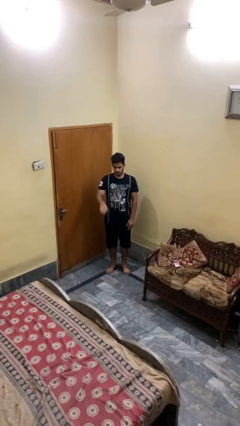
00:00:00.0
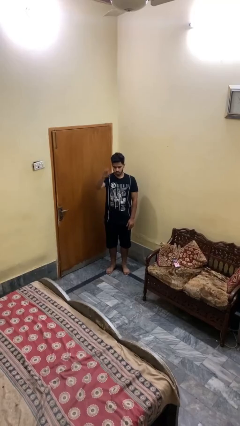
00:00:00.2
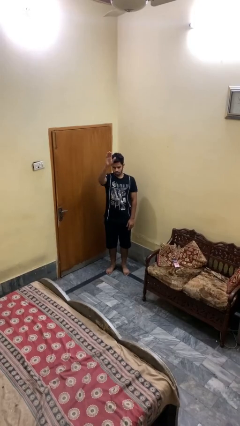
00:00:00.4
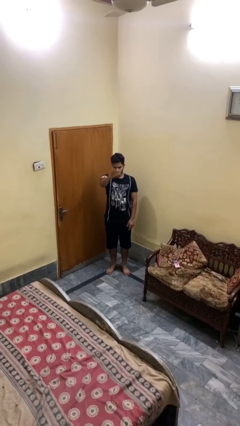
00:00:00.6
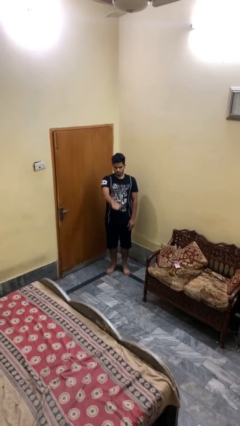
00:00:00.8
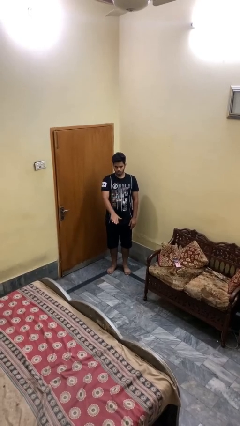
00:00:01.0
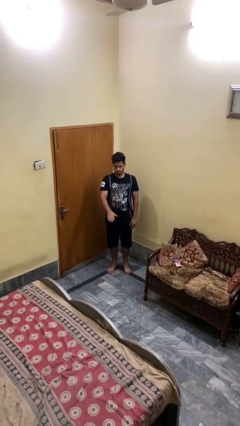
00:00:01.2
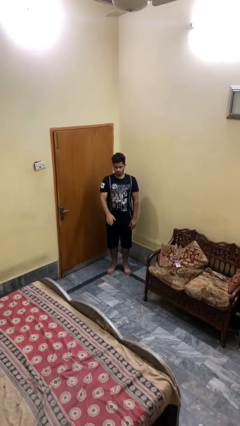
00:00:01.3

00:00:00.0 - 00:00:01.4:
person gestures swipe down

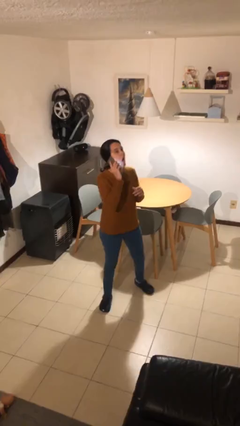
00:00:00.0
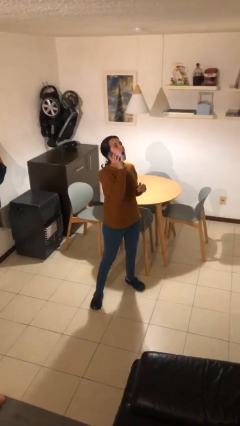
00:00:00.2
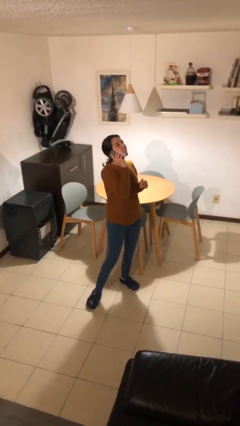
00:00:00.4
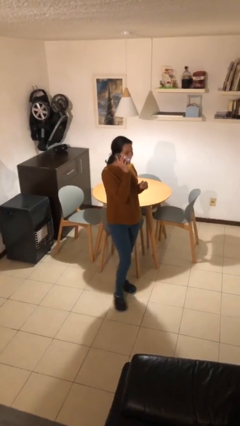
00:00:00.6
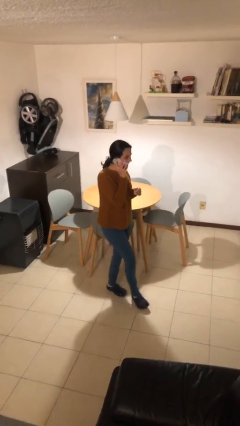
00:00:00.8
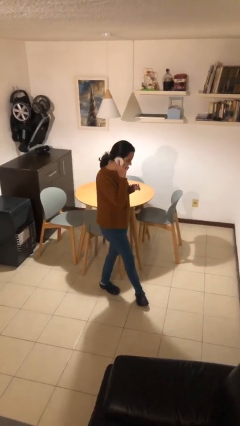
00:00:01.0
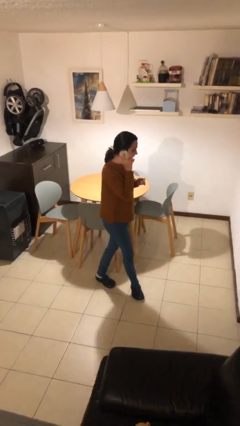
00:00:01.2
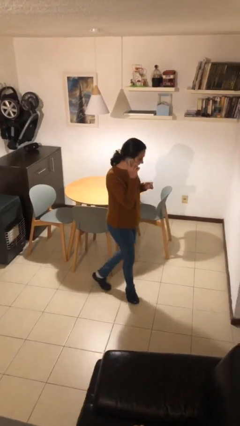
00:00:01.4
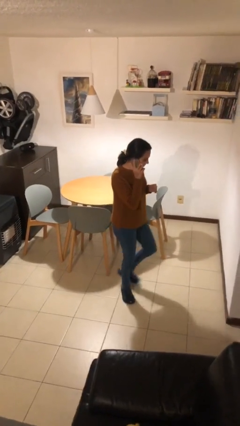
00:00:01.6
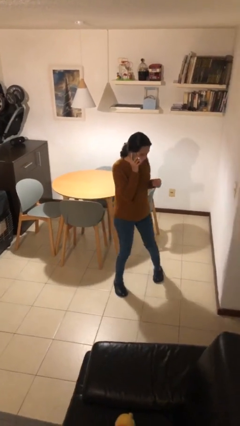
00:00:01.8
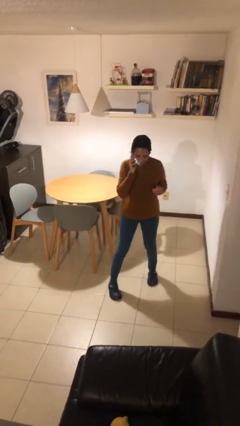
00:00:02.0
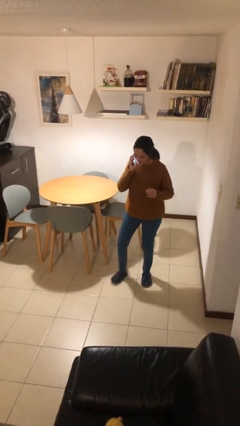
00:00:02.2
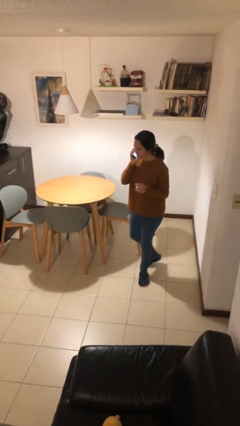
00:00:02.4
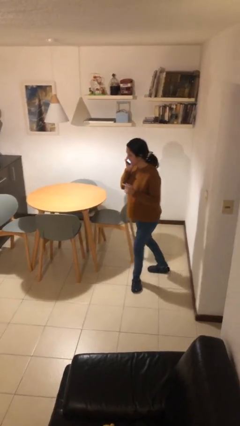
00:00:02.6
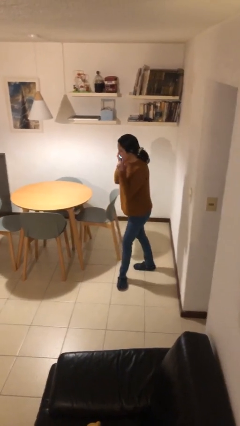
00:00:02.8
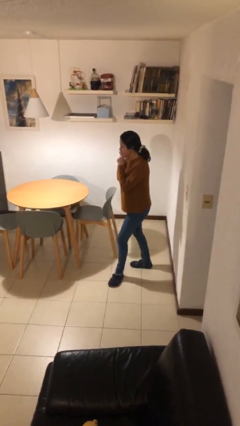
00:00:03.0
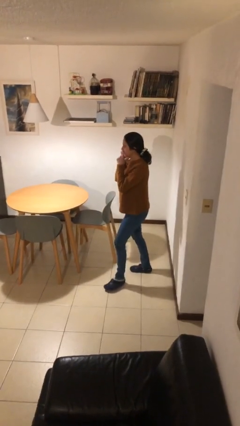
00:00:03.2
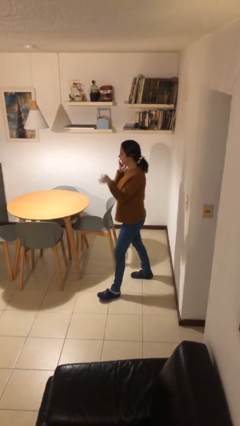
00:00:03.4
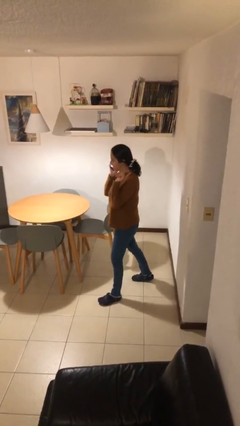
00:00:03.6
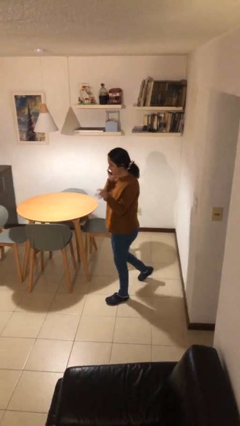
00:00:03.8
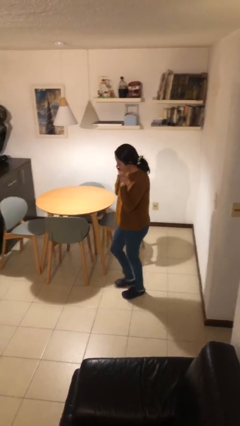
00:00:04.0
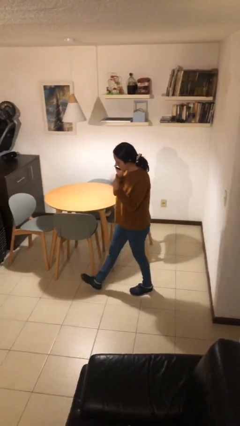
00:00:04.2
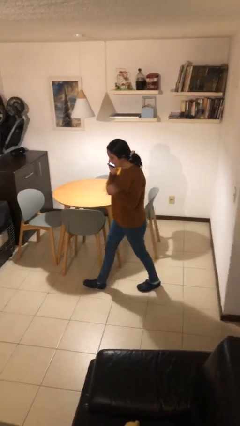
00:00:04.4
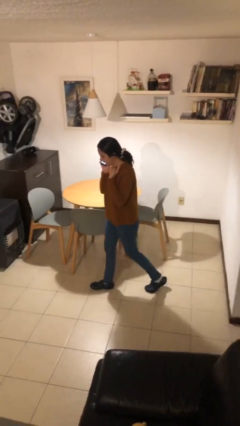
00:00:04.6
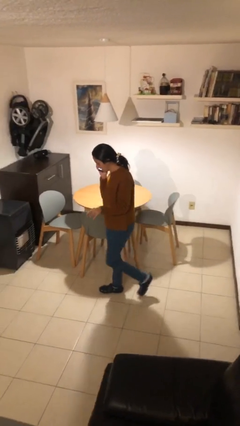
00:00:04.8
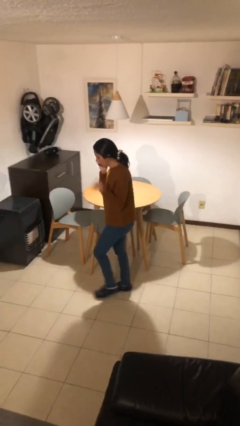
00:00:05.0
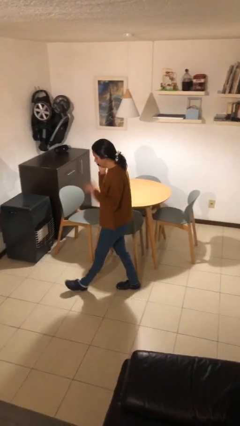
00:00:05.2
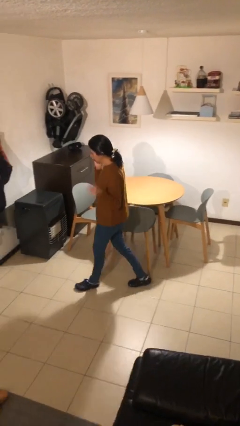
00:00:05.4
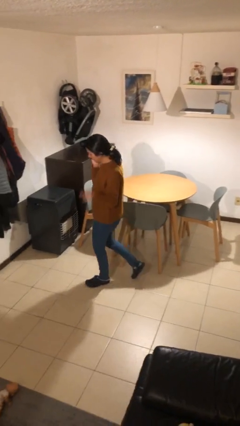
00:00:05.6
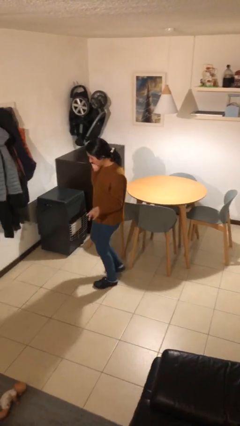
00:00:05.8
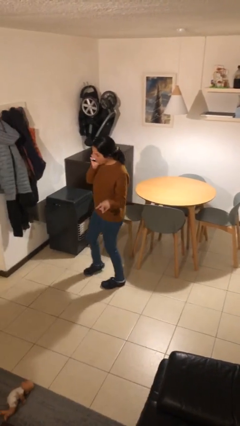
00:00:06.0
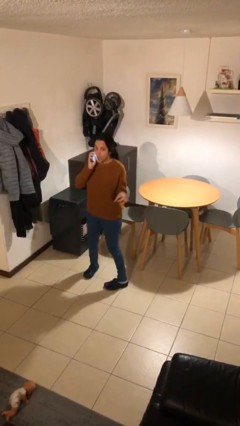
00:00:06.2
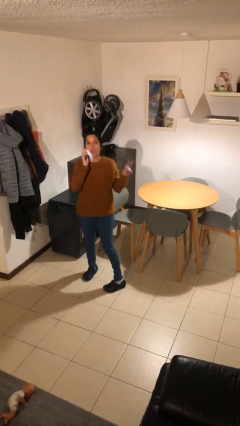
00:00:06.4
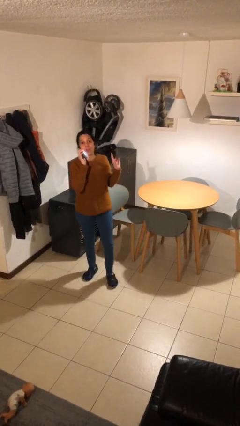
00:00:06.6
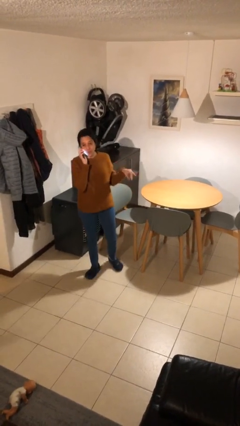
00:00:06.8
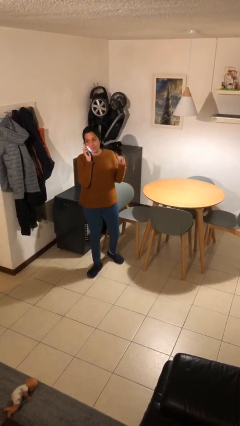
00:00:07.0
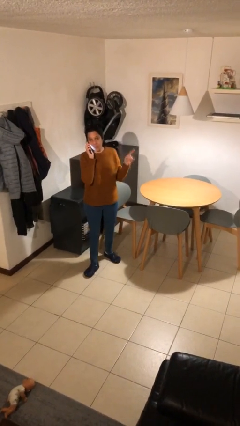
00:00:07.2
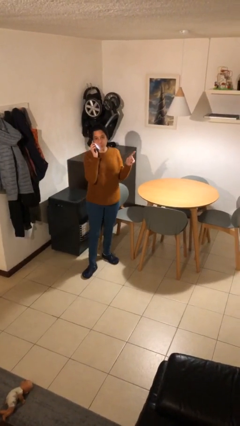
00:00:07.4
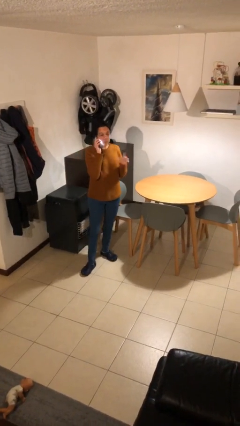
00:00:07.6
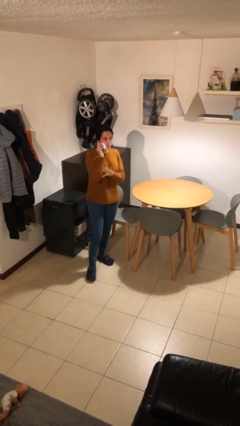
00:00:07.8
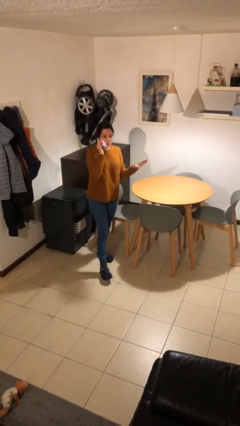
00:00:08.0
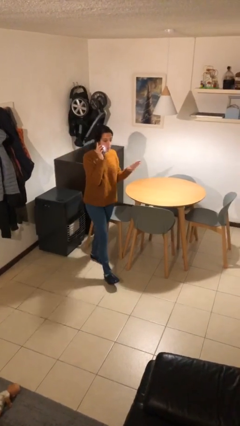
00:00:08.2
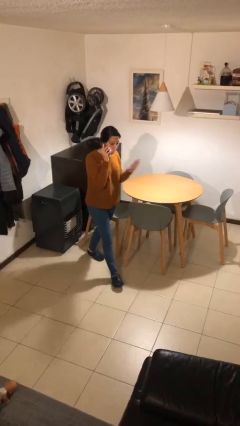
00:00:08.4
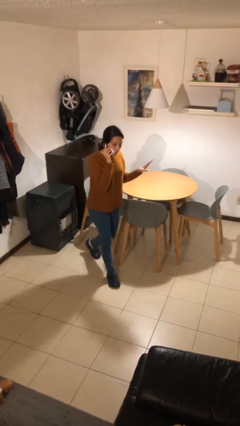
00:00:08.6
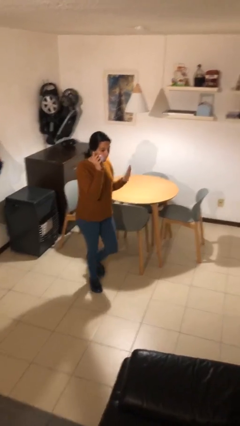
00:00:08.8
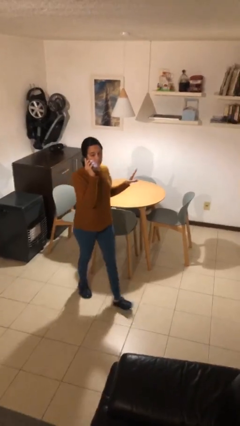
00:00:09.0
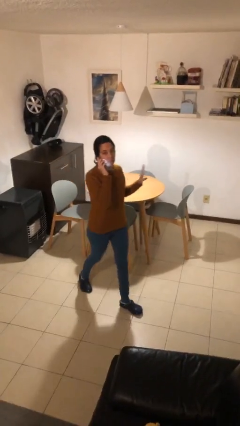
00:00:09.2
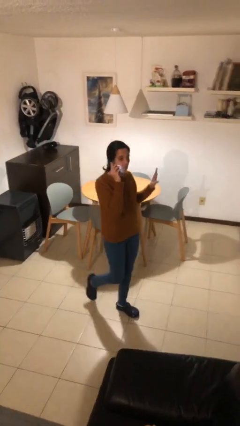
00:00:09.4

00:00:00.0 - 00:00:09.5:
person talks on phone

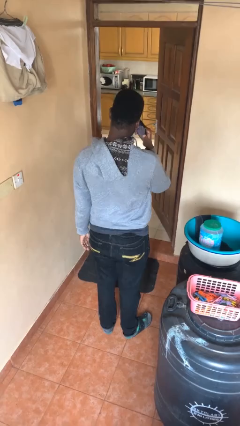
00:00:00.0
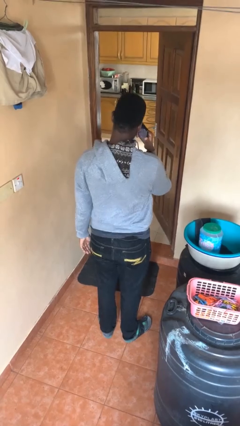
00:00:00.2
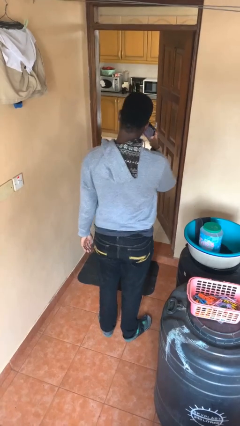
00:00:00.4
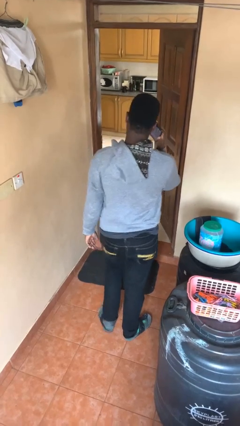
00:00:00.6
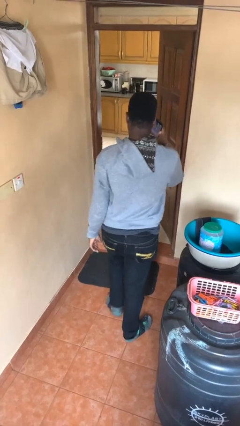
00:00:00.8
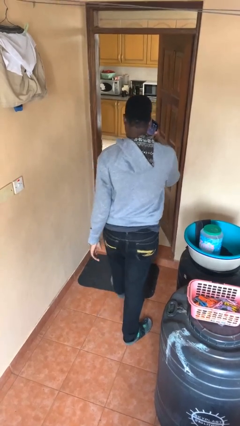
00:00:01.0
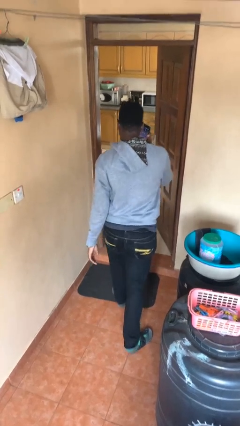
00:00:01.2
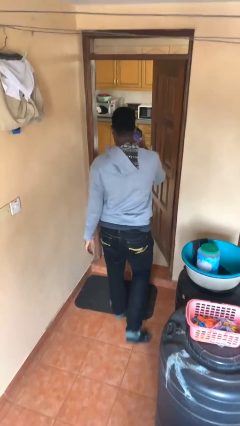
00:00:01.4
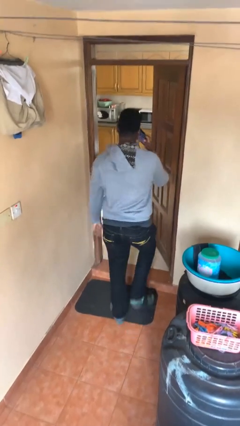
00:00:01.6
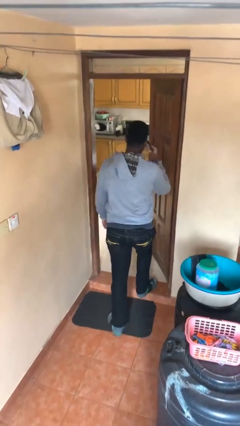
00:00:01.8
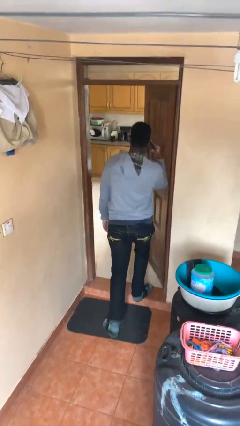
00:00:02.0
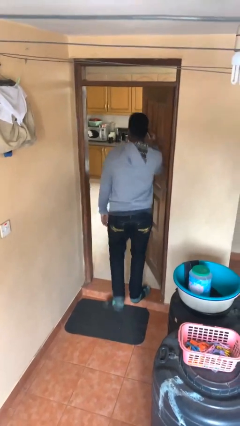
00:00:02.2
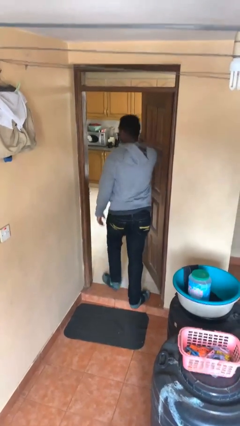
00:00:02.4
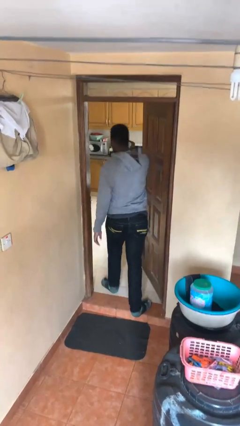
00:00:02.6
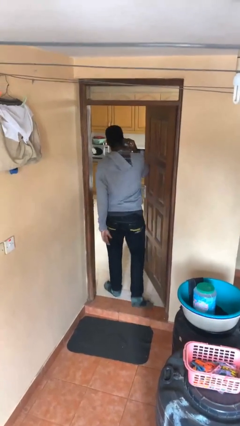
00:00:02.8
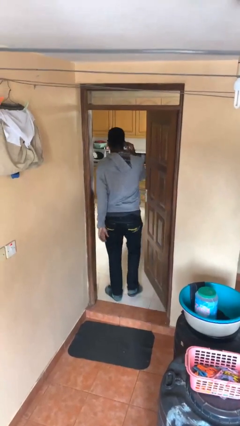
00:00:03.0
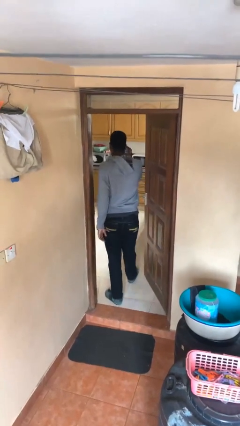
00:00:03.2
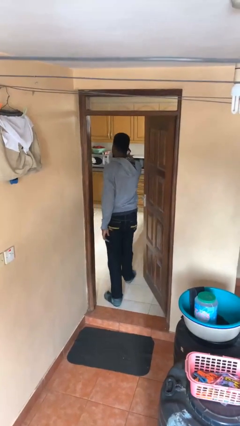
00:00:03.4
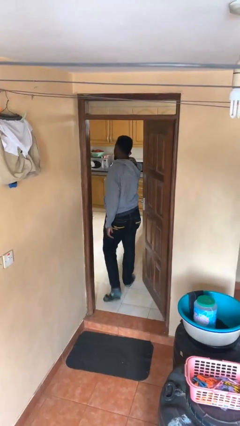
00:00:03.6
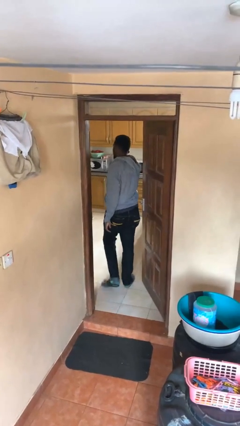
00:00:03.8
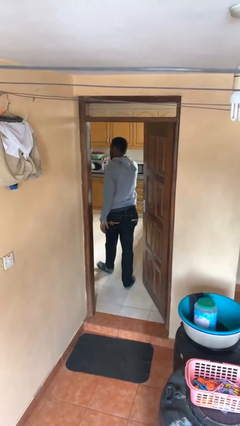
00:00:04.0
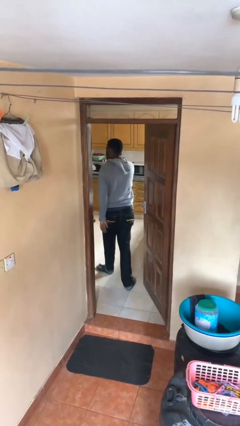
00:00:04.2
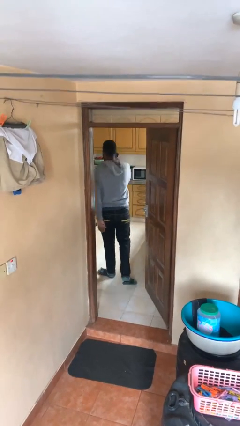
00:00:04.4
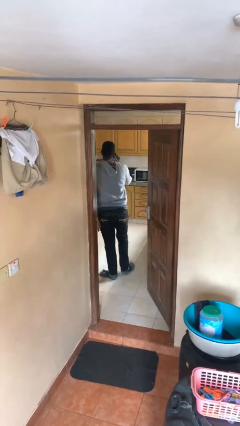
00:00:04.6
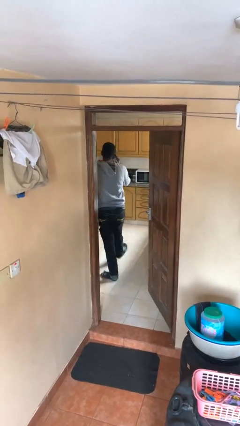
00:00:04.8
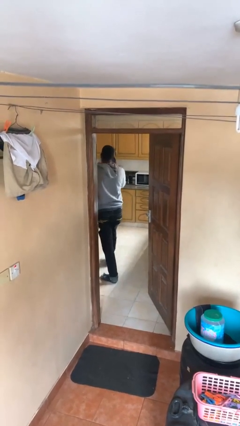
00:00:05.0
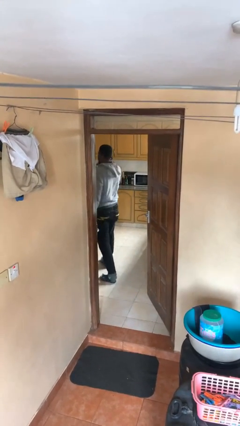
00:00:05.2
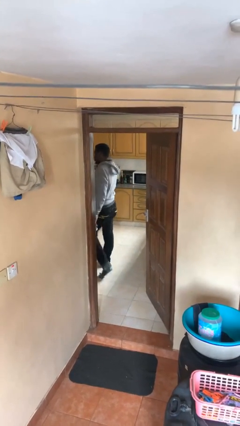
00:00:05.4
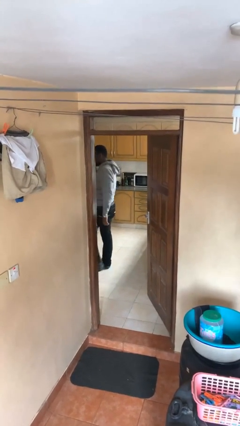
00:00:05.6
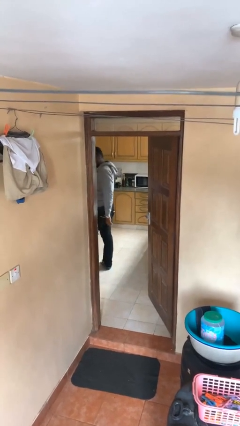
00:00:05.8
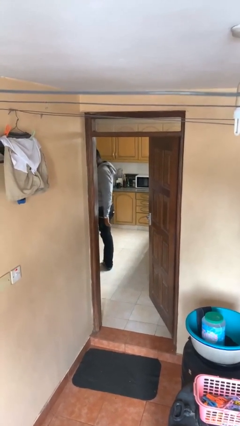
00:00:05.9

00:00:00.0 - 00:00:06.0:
person exits scene through structure

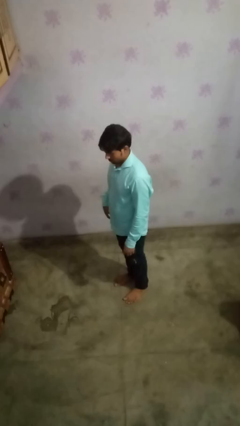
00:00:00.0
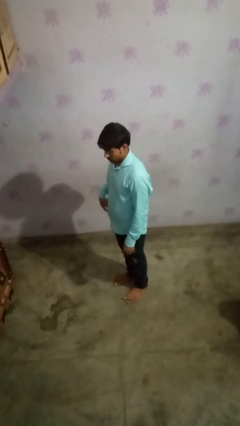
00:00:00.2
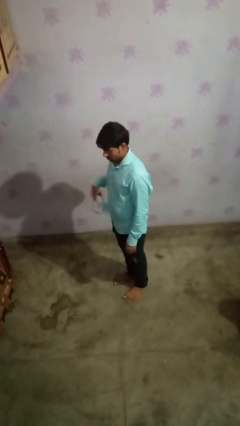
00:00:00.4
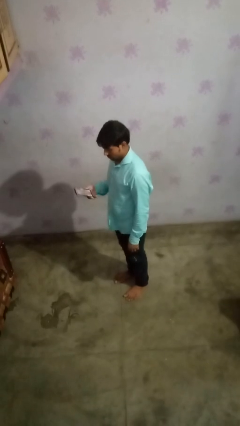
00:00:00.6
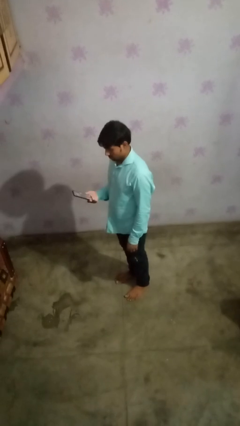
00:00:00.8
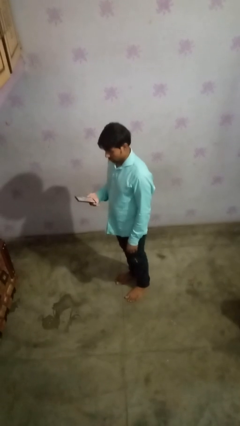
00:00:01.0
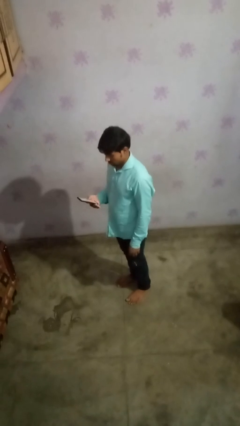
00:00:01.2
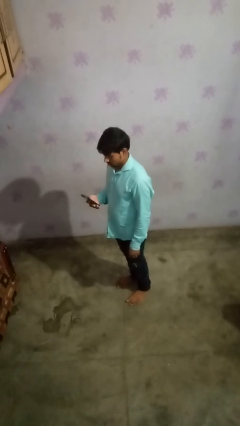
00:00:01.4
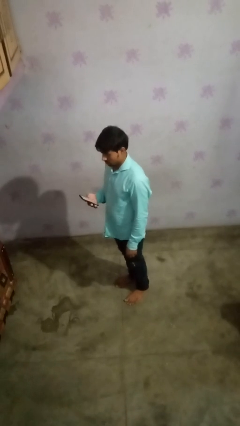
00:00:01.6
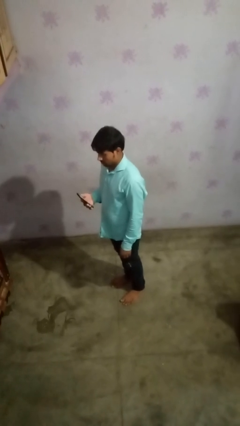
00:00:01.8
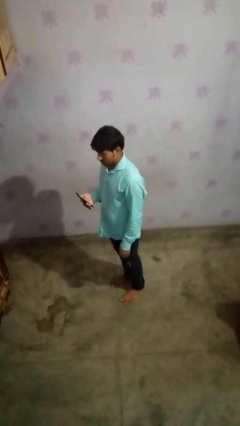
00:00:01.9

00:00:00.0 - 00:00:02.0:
person takes phone from pocket
